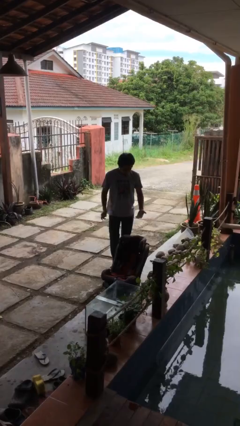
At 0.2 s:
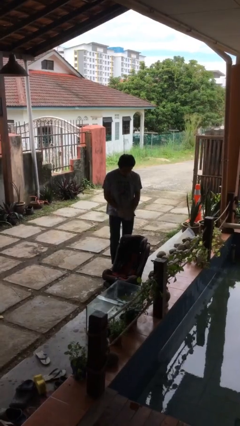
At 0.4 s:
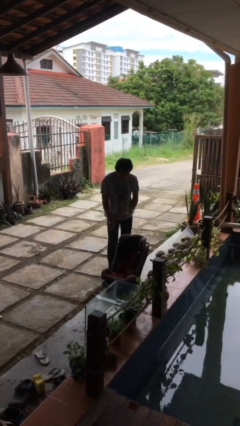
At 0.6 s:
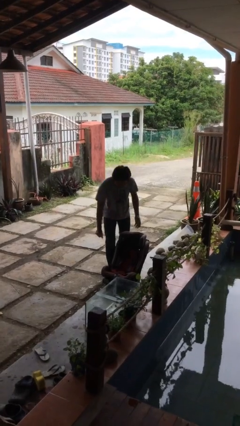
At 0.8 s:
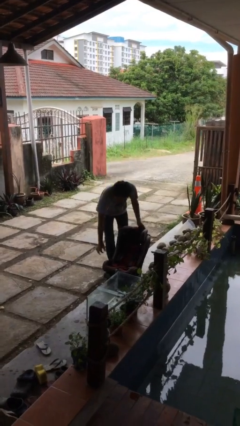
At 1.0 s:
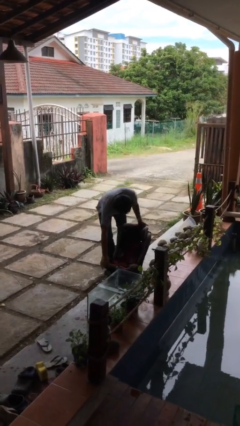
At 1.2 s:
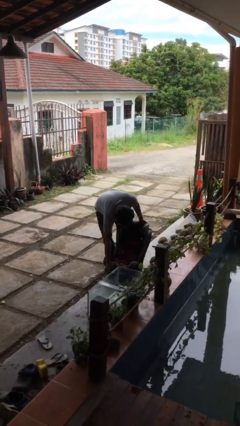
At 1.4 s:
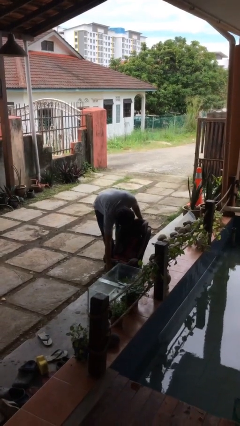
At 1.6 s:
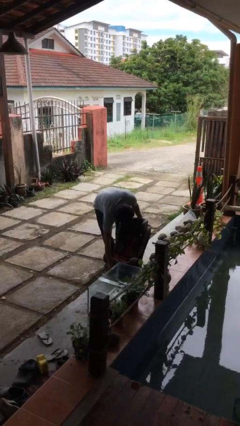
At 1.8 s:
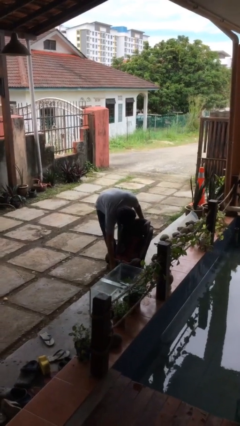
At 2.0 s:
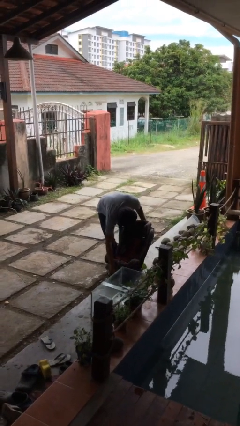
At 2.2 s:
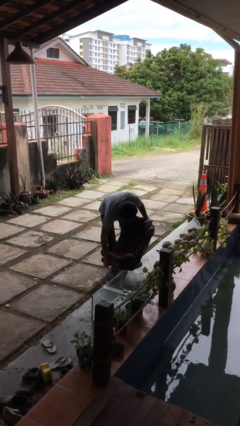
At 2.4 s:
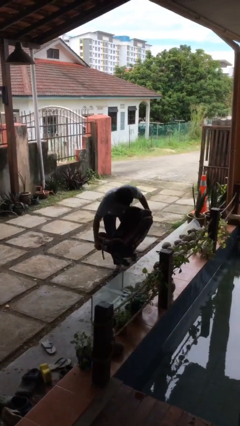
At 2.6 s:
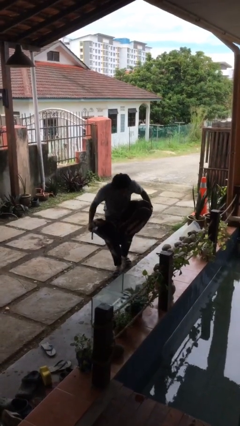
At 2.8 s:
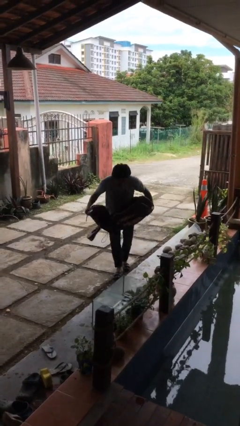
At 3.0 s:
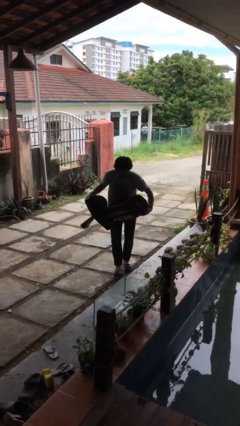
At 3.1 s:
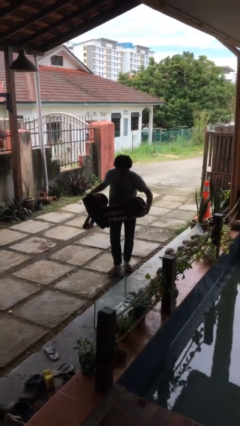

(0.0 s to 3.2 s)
person picks up object from floor

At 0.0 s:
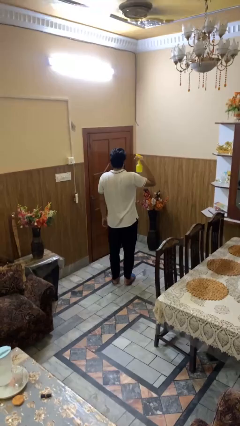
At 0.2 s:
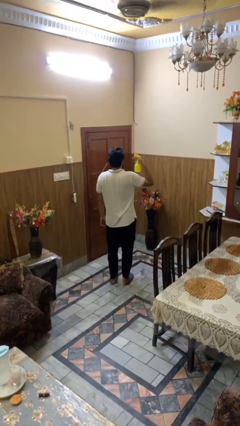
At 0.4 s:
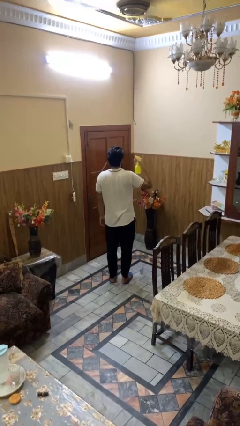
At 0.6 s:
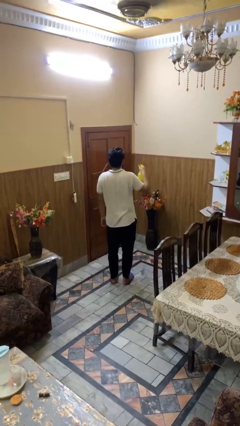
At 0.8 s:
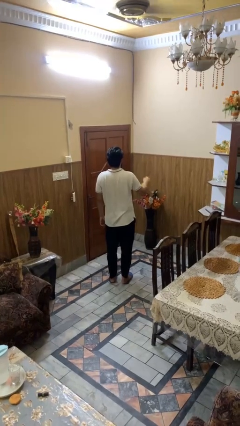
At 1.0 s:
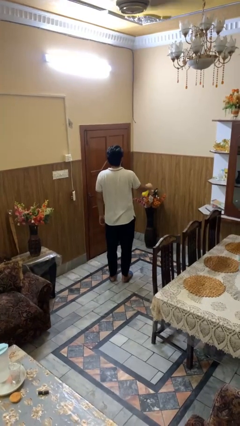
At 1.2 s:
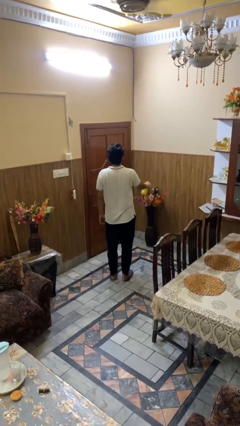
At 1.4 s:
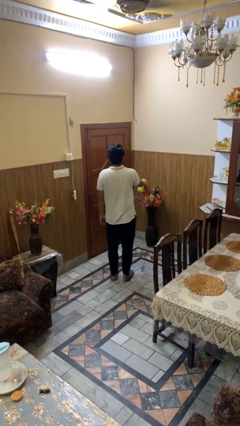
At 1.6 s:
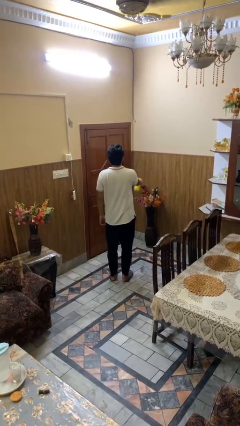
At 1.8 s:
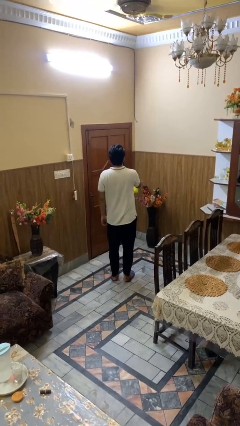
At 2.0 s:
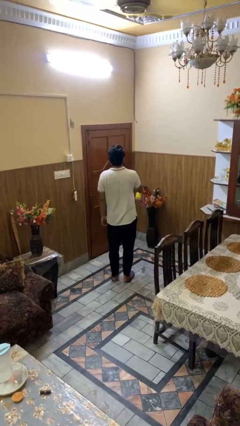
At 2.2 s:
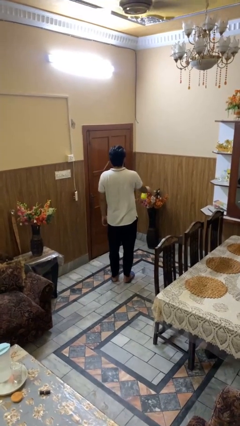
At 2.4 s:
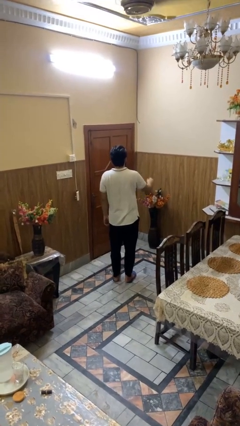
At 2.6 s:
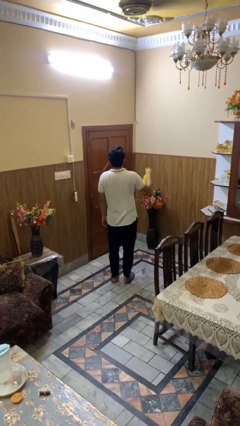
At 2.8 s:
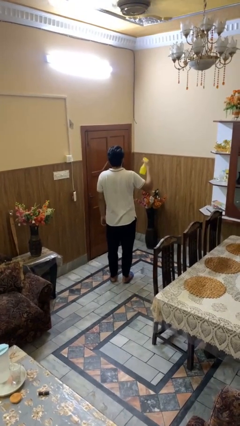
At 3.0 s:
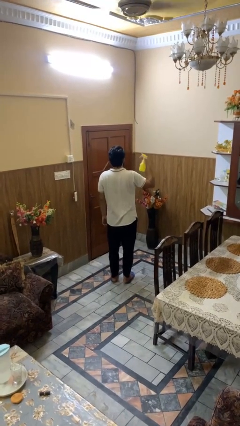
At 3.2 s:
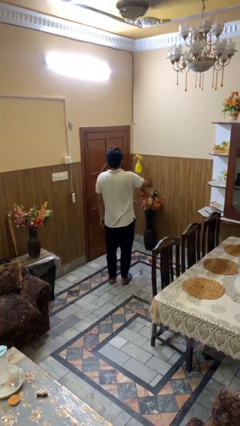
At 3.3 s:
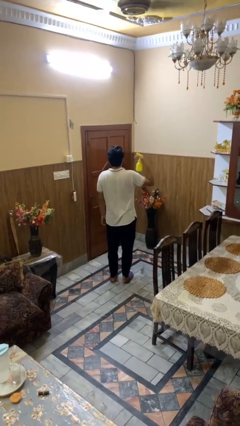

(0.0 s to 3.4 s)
person sprays from bottle

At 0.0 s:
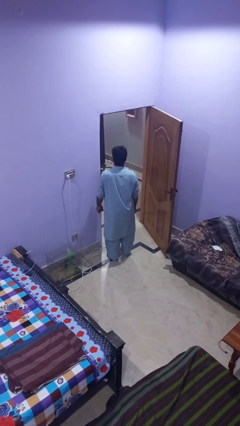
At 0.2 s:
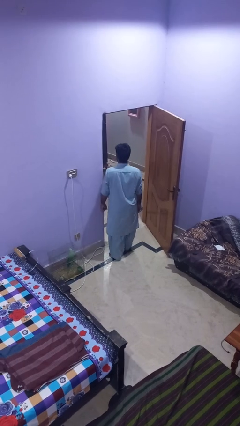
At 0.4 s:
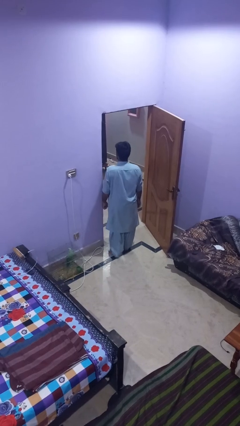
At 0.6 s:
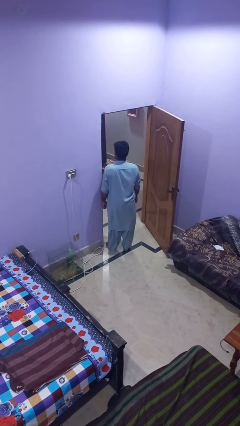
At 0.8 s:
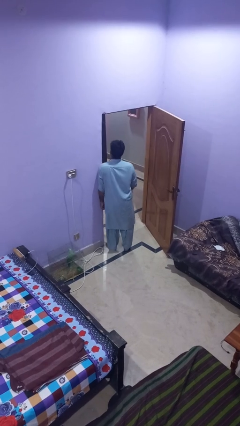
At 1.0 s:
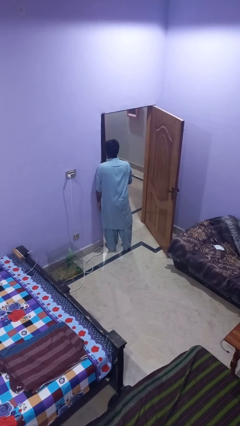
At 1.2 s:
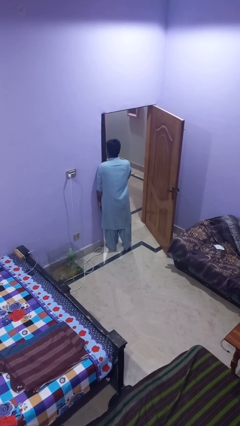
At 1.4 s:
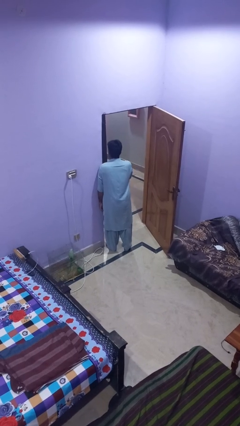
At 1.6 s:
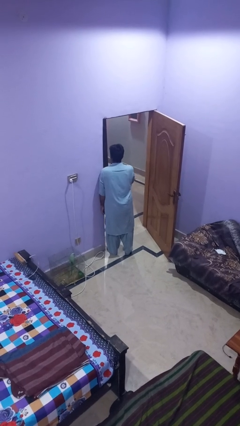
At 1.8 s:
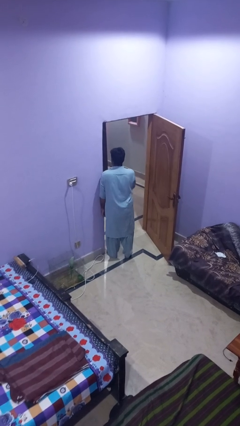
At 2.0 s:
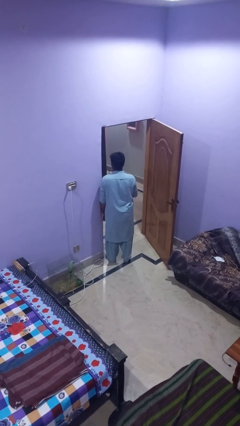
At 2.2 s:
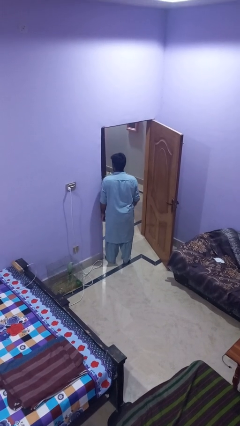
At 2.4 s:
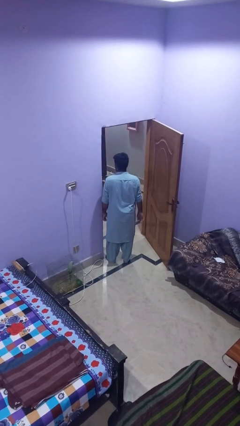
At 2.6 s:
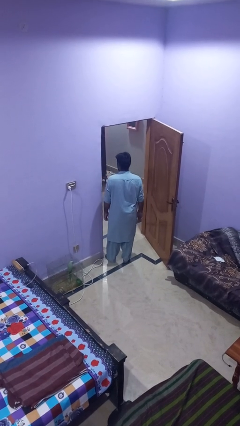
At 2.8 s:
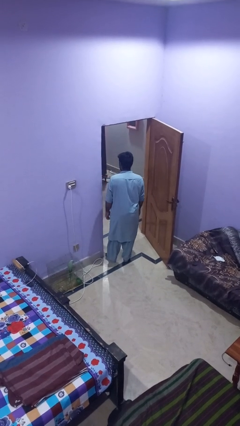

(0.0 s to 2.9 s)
person bumps into wall

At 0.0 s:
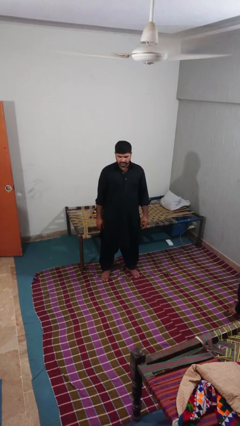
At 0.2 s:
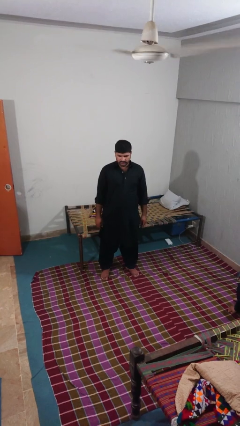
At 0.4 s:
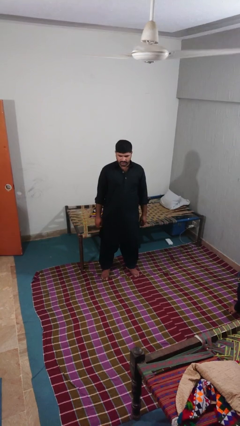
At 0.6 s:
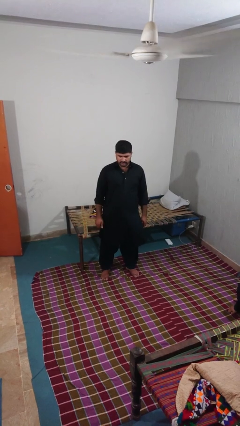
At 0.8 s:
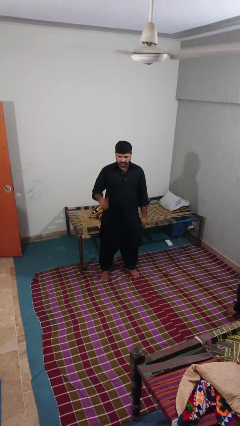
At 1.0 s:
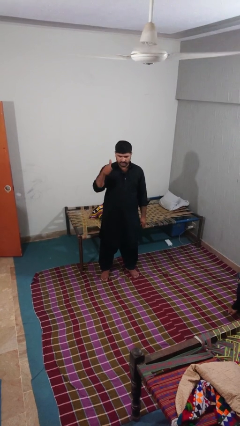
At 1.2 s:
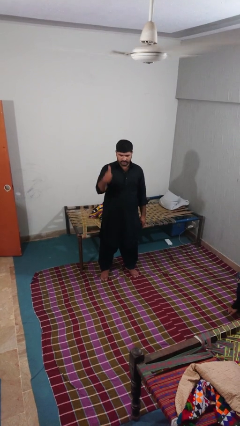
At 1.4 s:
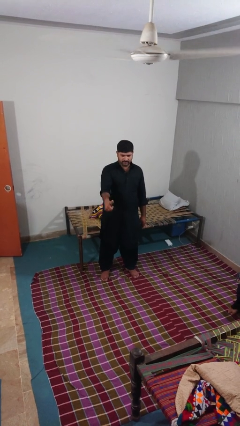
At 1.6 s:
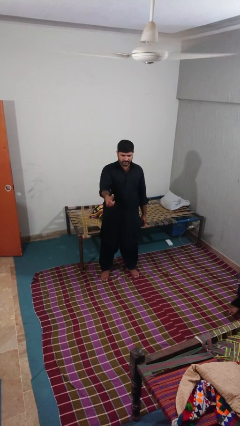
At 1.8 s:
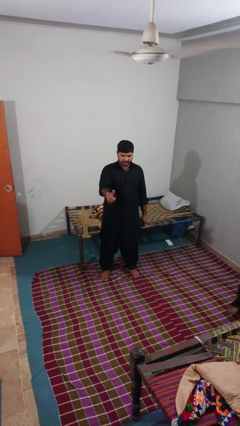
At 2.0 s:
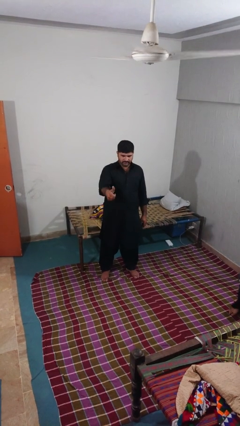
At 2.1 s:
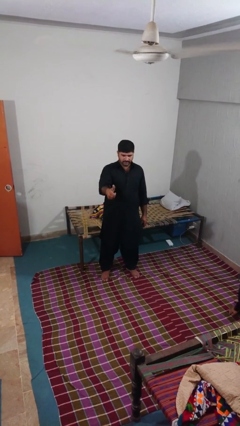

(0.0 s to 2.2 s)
person gestures thumbs up

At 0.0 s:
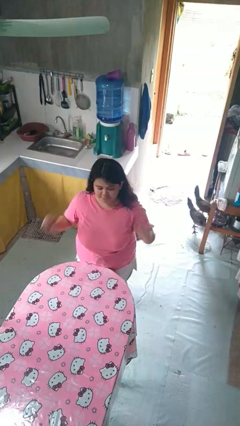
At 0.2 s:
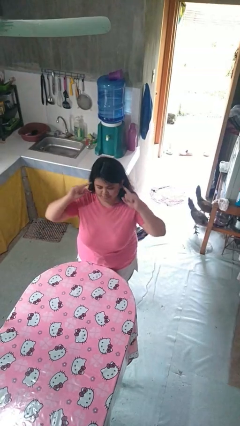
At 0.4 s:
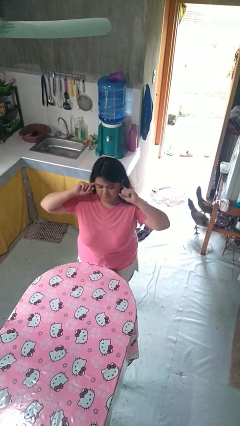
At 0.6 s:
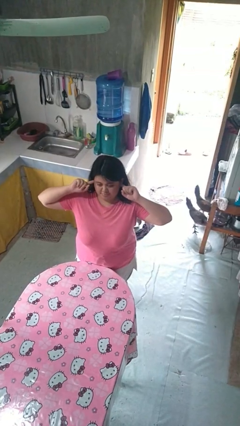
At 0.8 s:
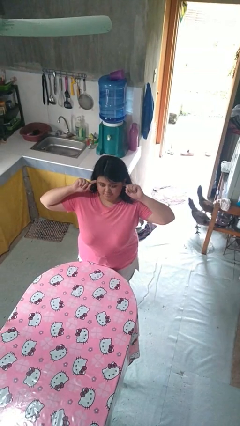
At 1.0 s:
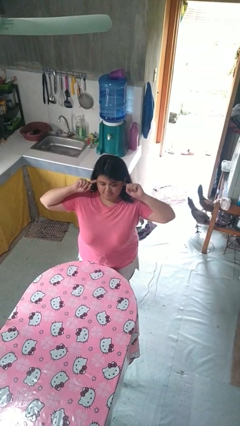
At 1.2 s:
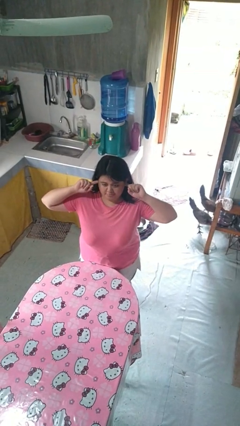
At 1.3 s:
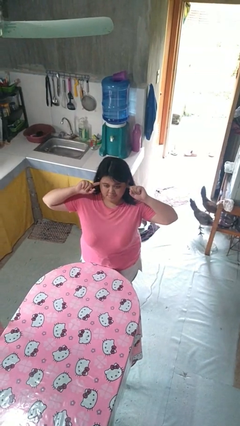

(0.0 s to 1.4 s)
person puts fingers in ear

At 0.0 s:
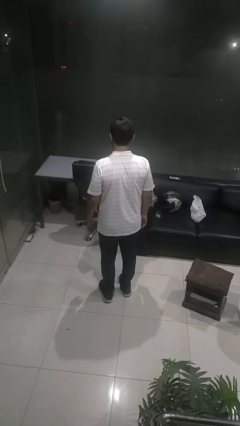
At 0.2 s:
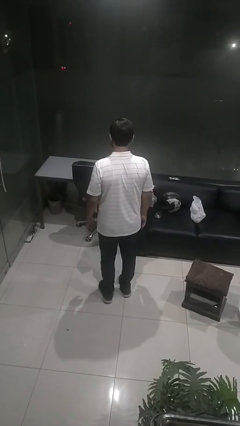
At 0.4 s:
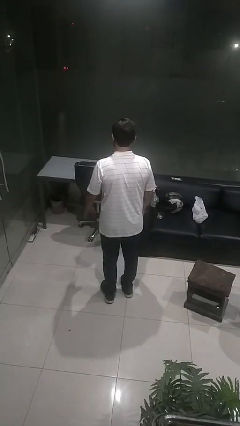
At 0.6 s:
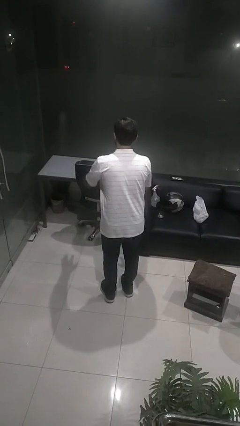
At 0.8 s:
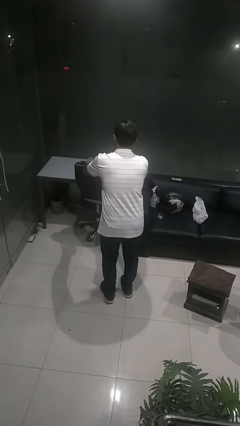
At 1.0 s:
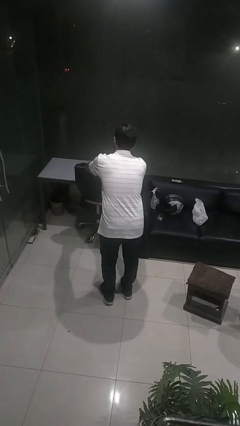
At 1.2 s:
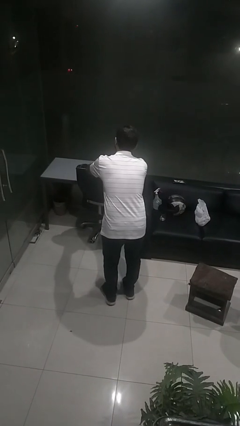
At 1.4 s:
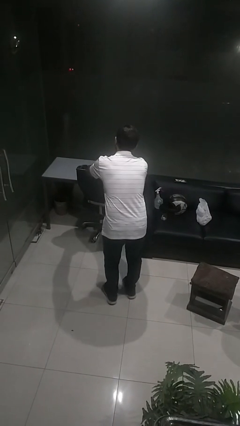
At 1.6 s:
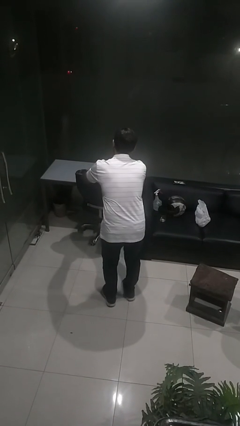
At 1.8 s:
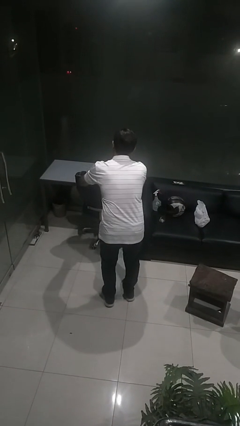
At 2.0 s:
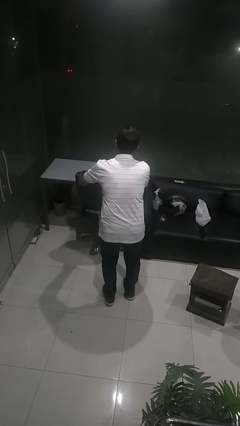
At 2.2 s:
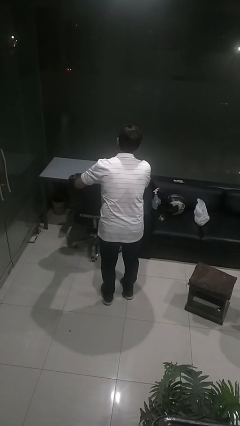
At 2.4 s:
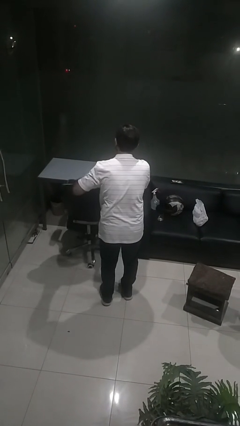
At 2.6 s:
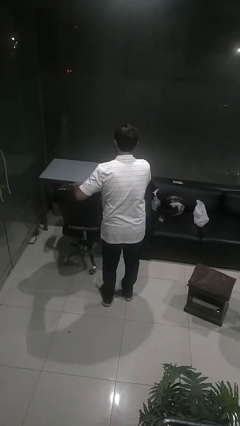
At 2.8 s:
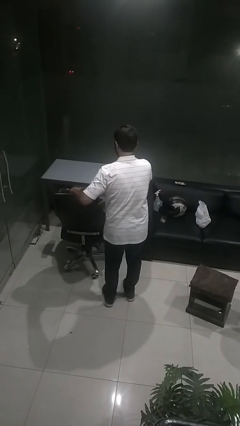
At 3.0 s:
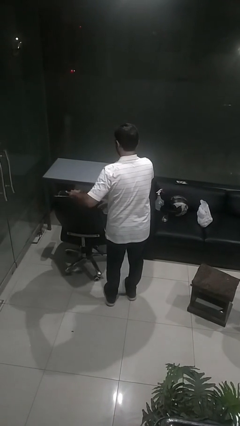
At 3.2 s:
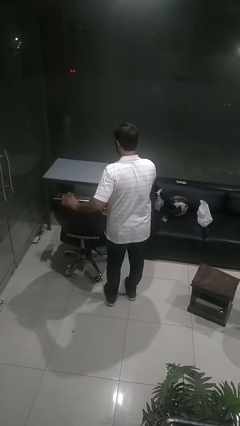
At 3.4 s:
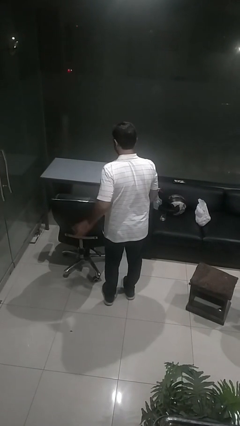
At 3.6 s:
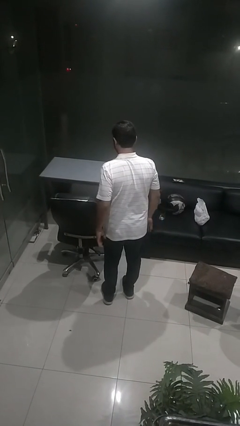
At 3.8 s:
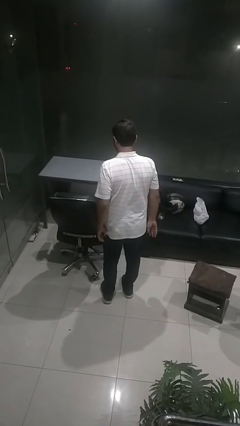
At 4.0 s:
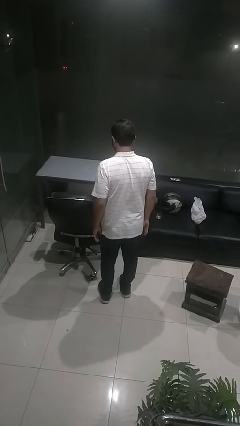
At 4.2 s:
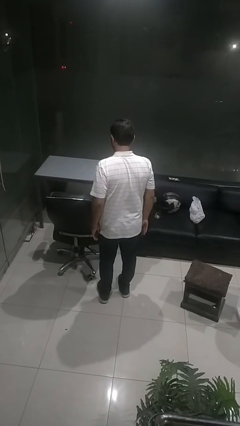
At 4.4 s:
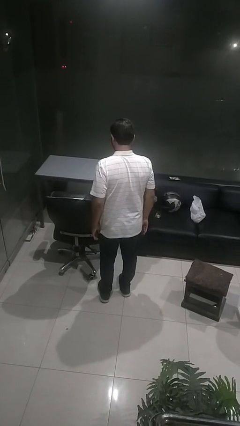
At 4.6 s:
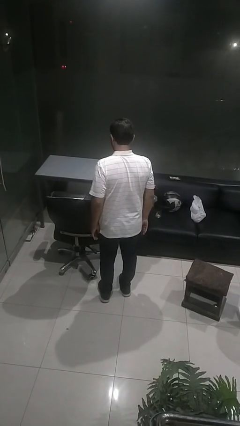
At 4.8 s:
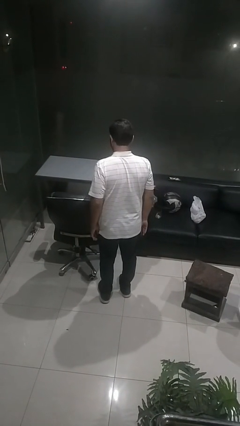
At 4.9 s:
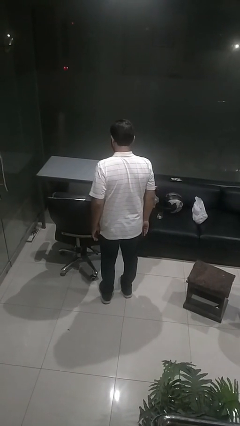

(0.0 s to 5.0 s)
person pulls out chair
